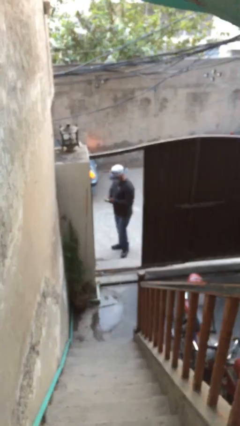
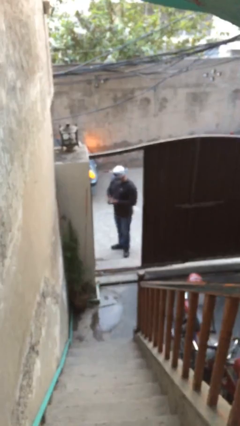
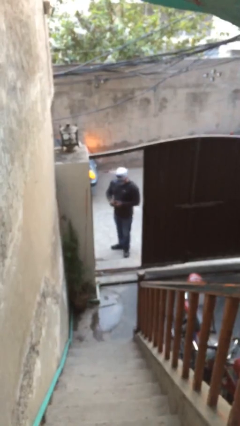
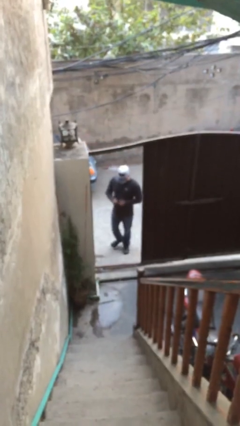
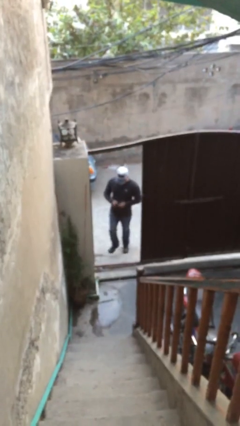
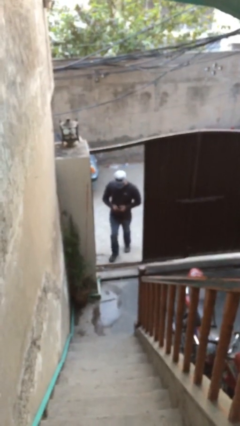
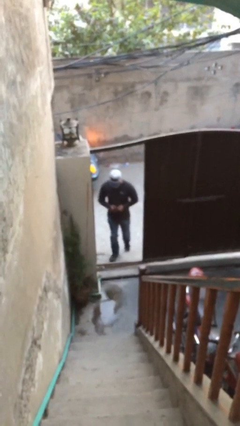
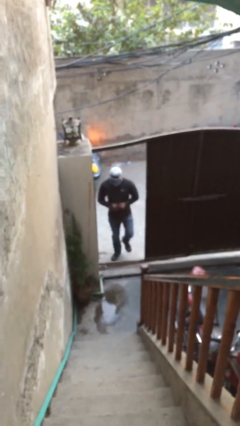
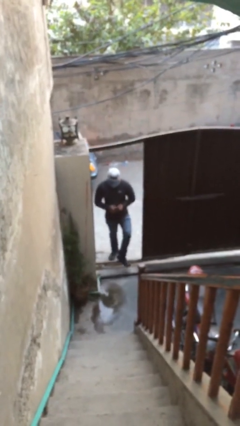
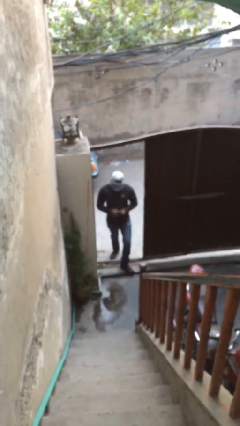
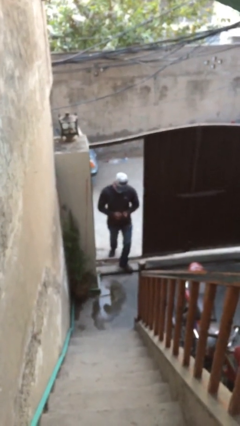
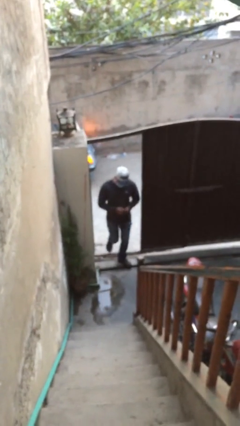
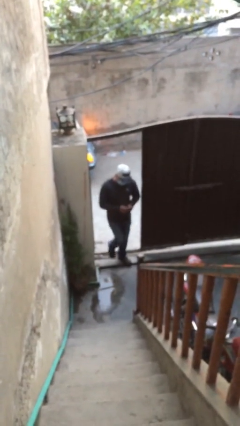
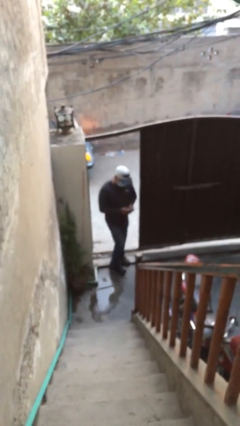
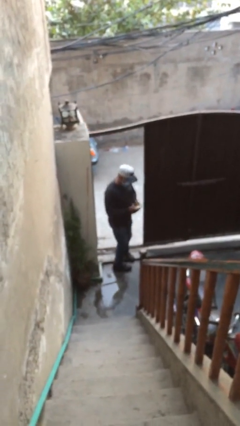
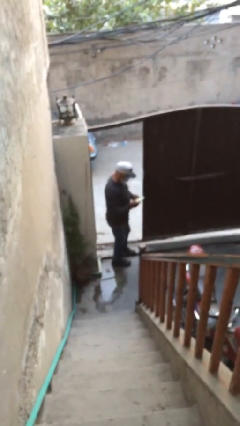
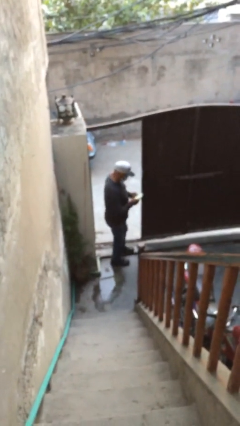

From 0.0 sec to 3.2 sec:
person enters scene through structure

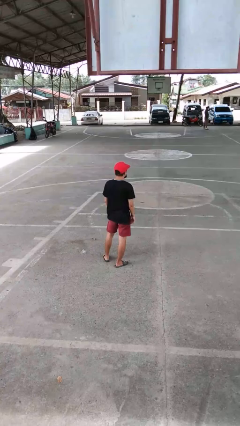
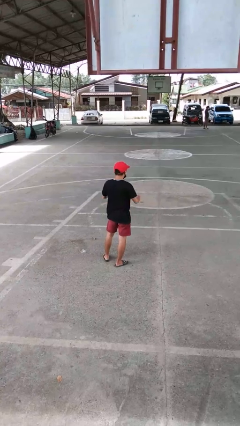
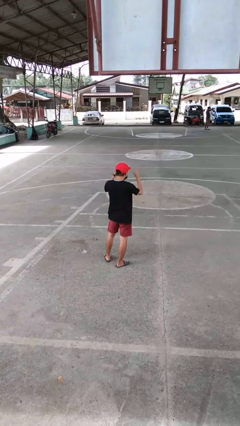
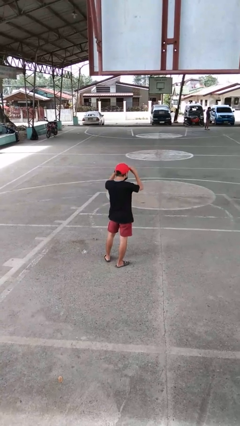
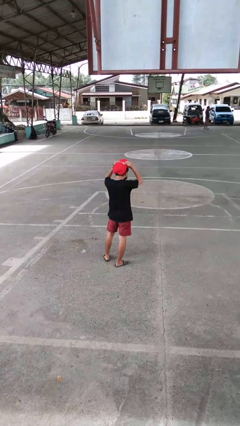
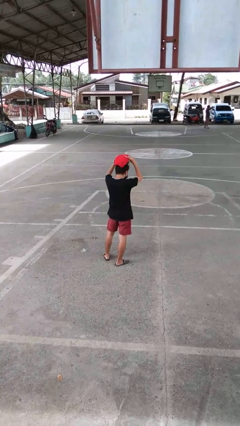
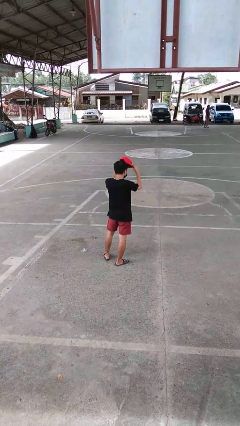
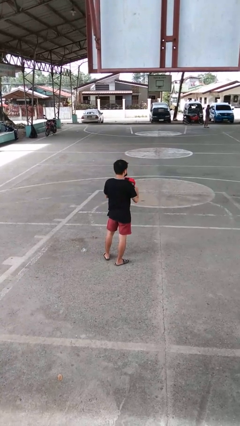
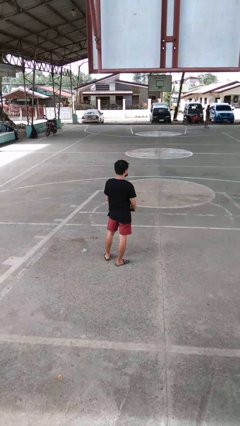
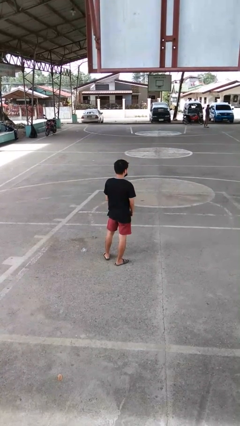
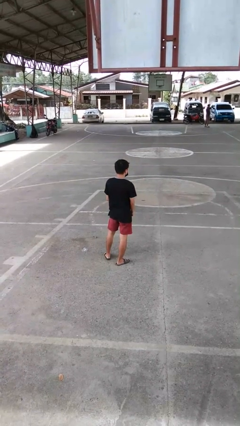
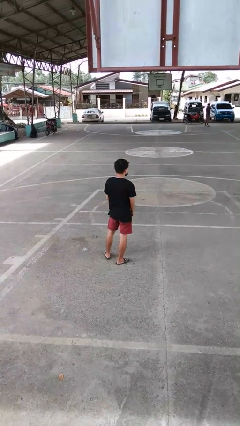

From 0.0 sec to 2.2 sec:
person takes off hat

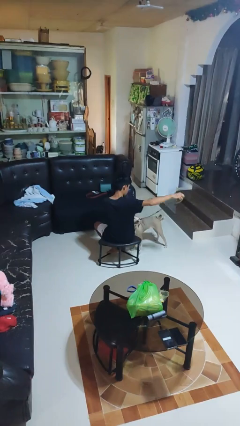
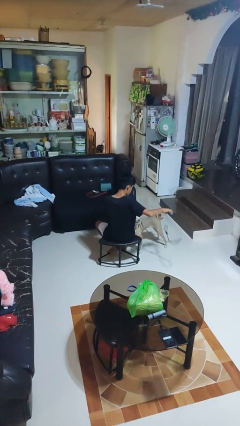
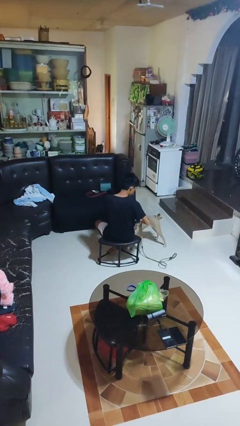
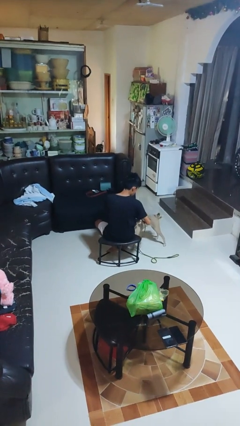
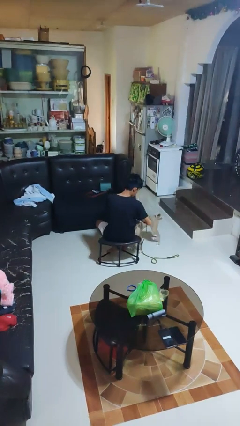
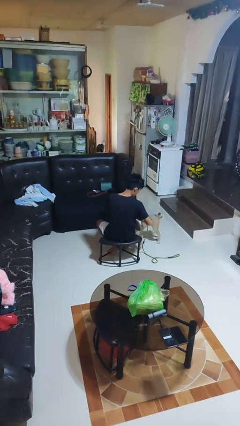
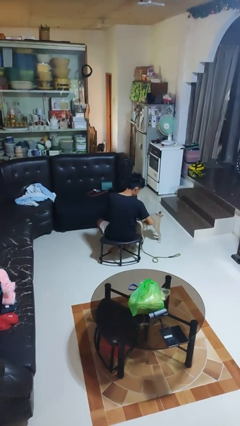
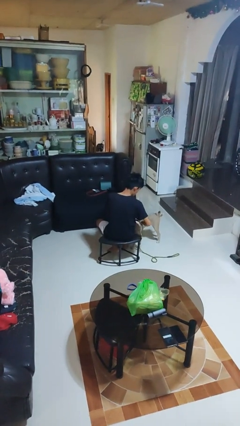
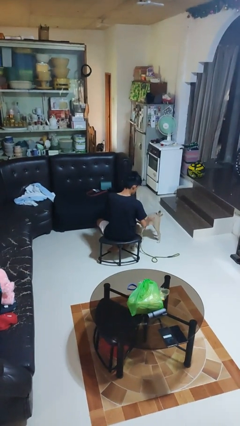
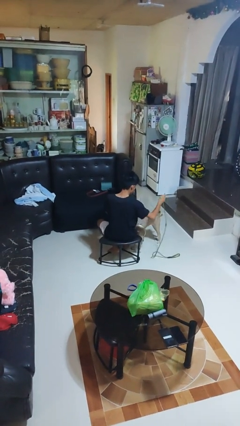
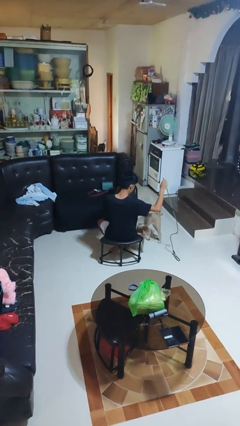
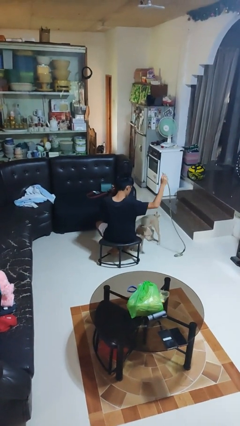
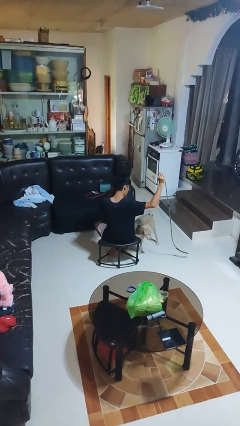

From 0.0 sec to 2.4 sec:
person unattaches leash from dog

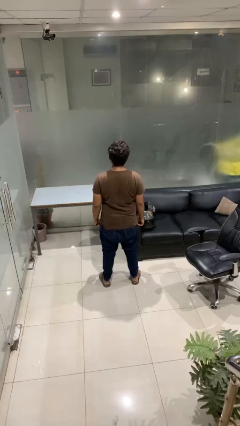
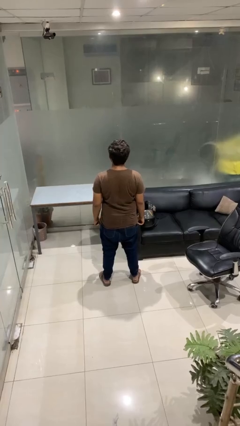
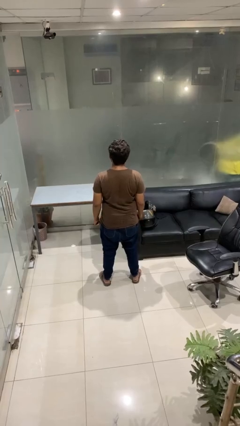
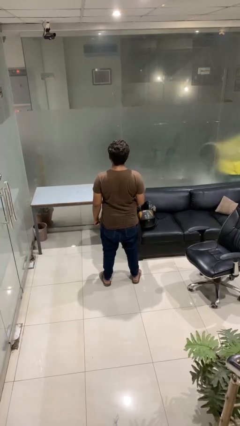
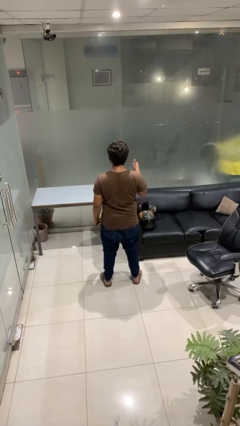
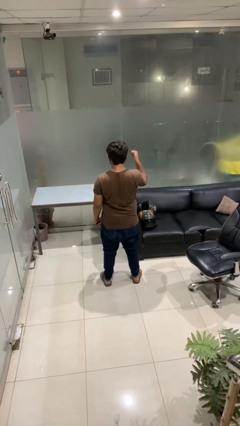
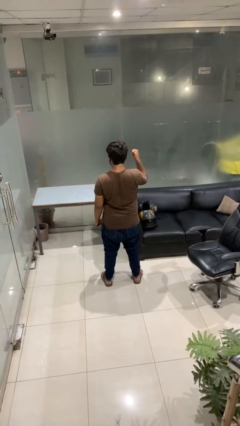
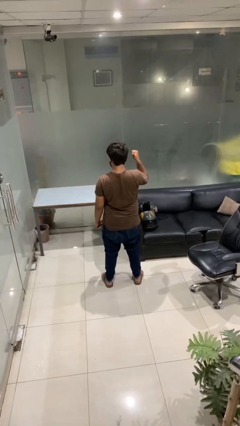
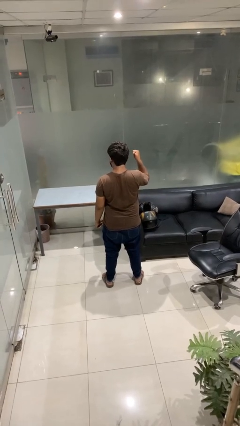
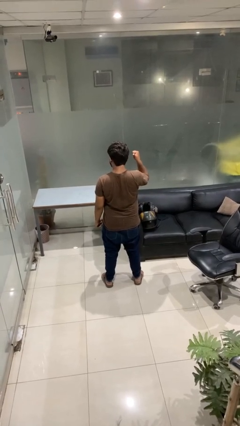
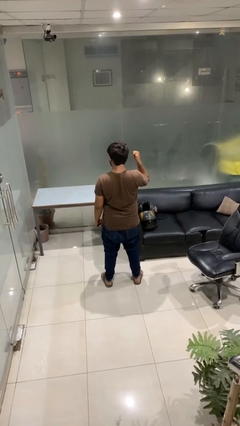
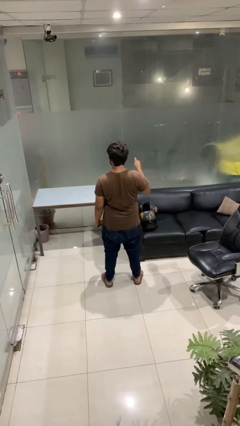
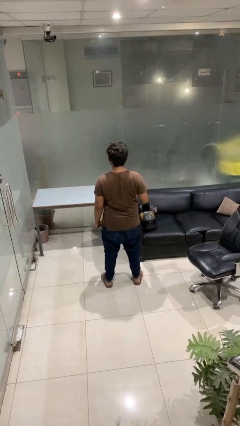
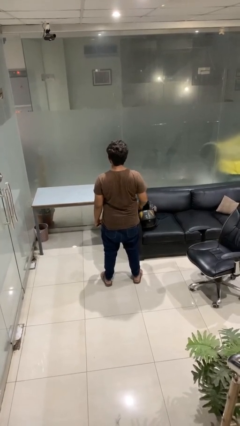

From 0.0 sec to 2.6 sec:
person gestures behind me

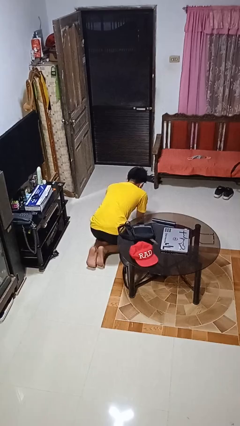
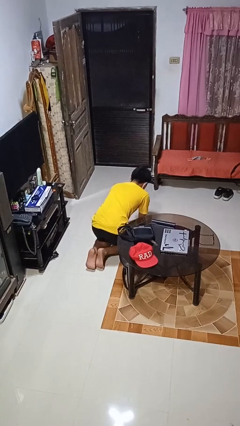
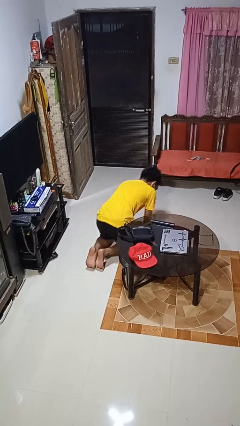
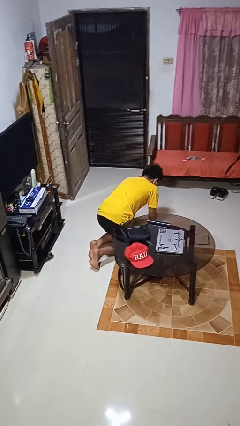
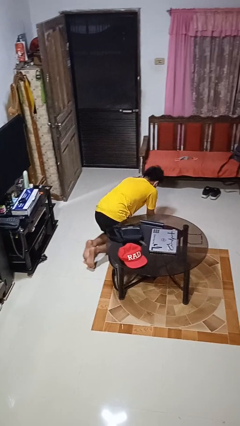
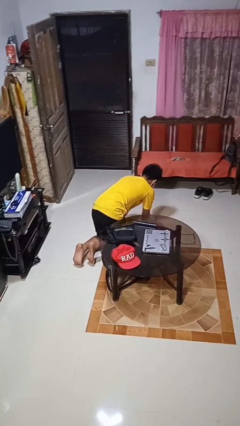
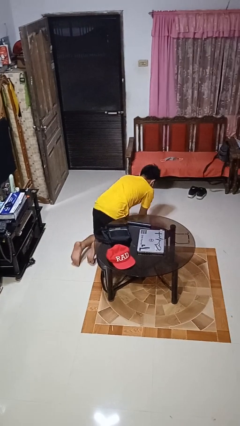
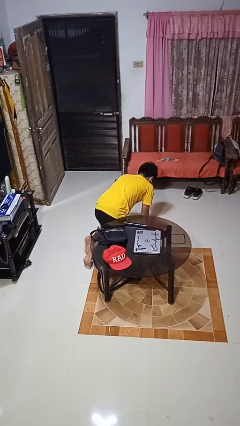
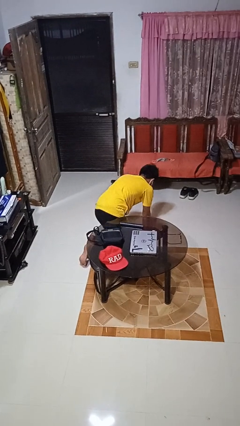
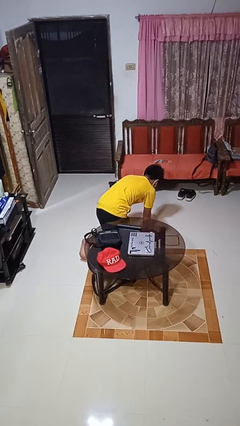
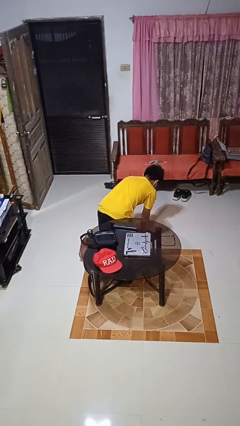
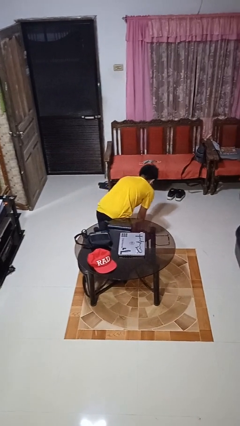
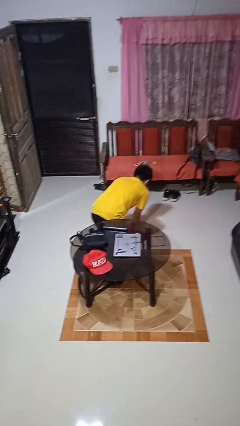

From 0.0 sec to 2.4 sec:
person crawls

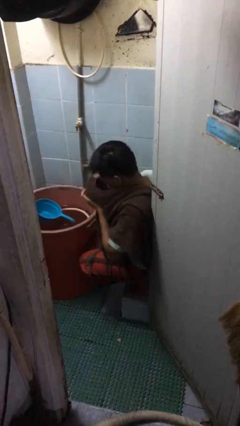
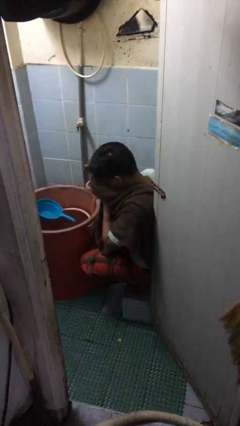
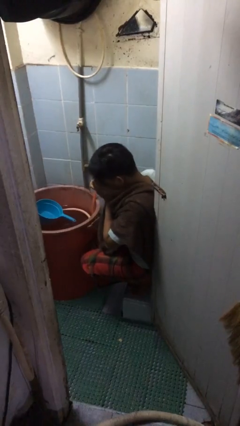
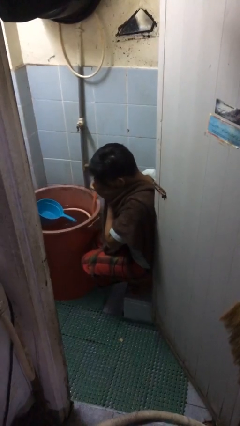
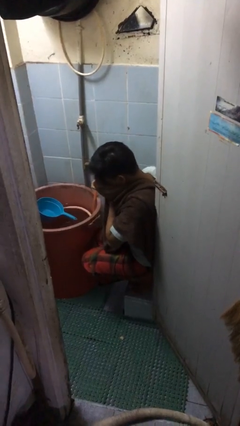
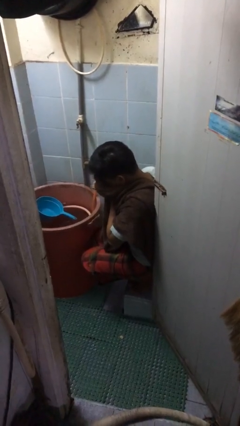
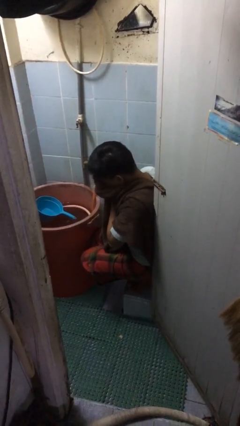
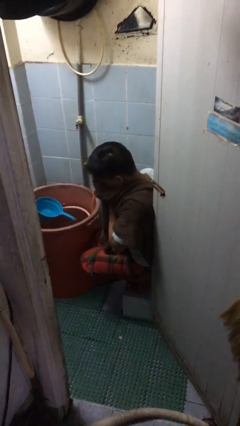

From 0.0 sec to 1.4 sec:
person dries face with towel

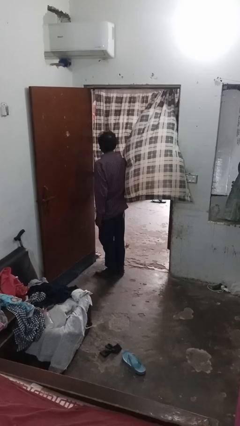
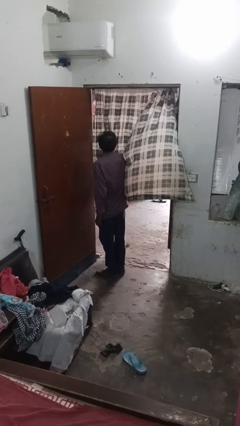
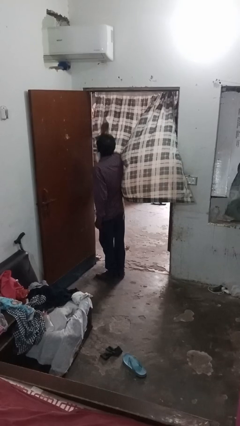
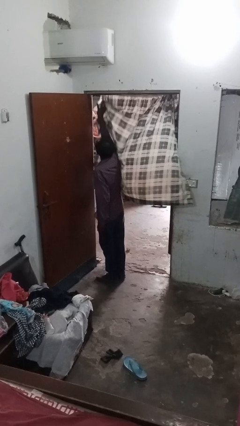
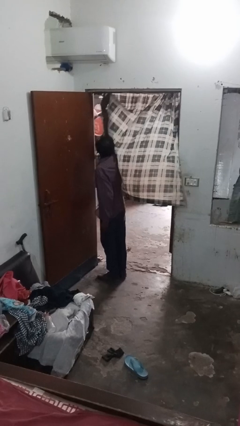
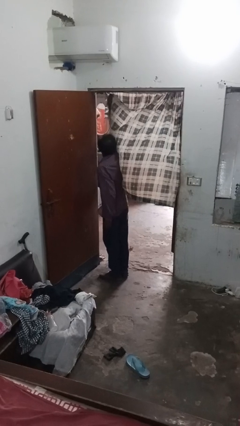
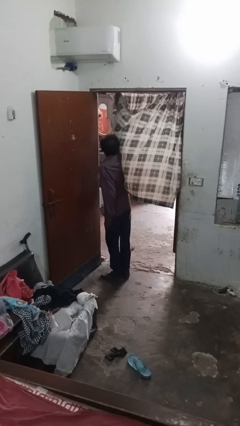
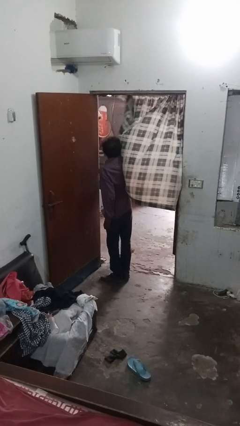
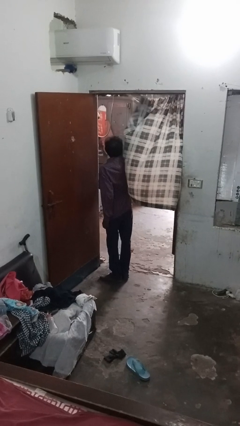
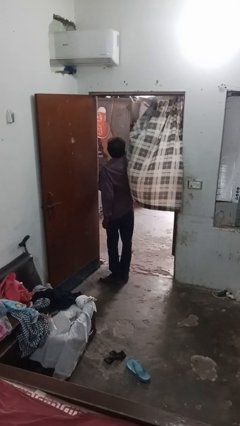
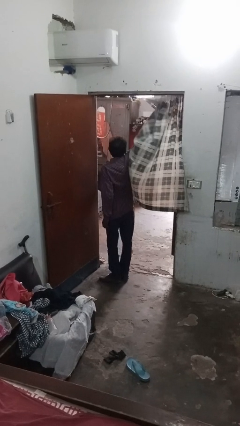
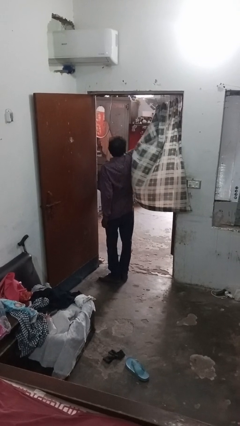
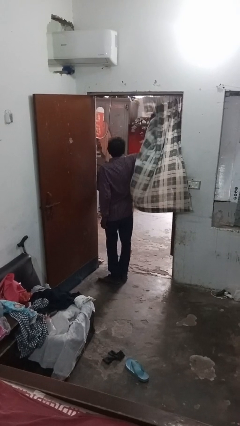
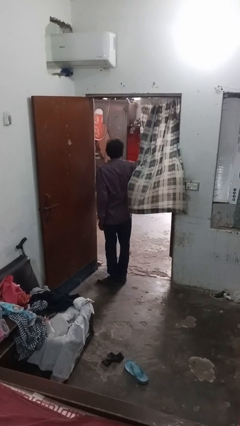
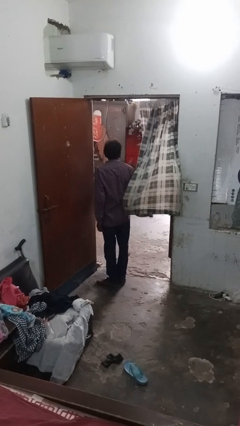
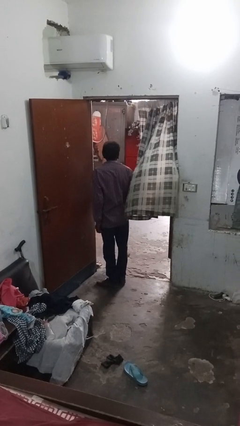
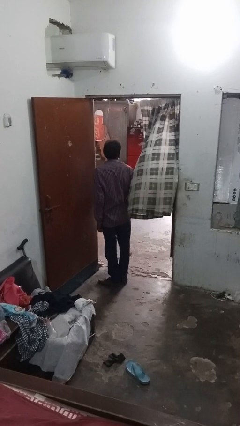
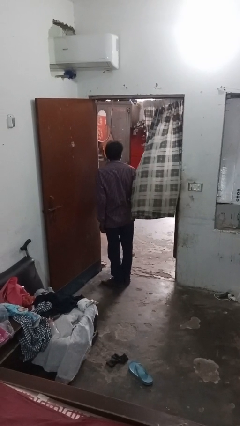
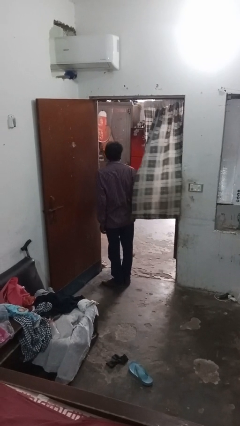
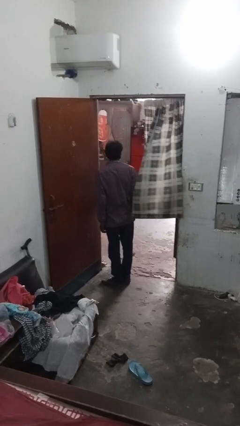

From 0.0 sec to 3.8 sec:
person opens curtains
